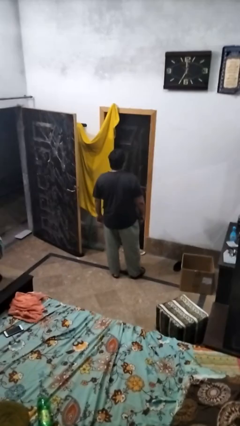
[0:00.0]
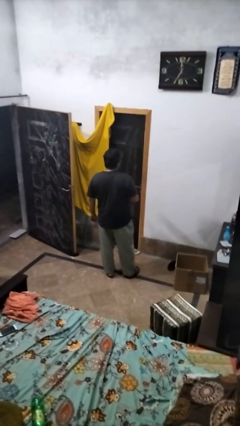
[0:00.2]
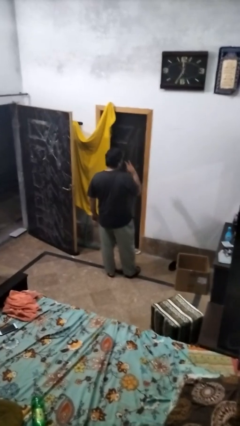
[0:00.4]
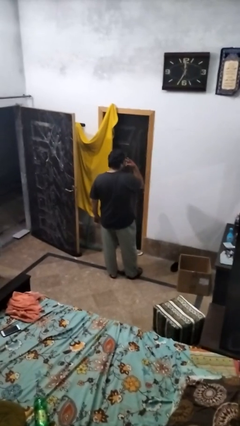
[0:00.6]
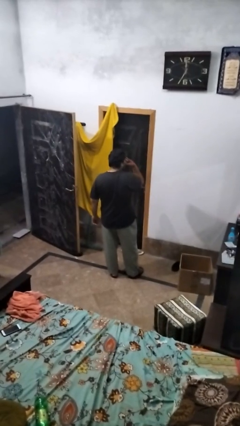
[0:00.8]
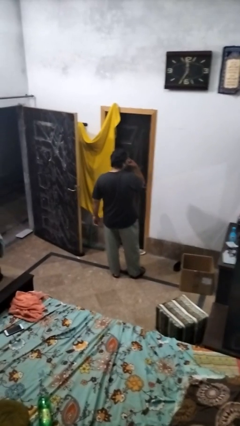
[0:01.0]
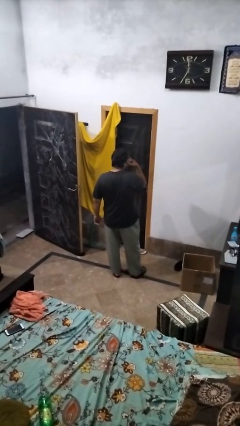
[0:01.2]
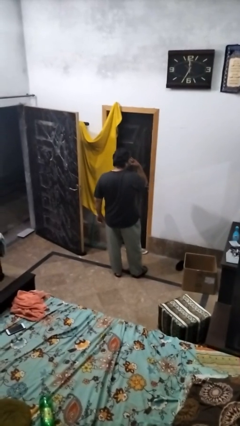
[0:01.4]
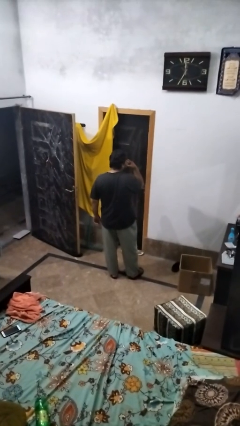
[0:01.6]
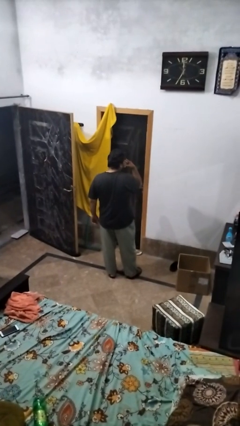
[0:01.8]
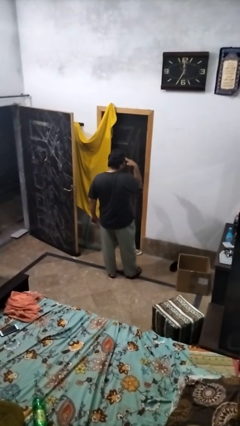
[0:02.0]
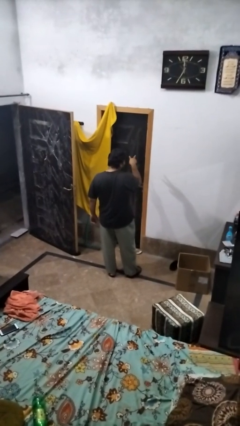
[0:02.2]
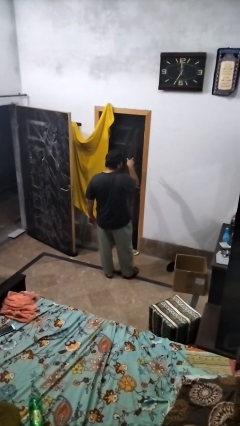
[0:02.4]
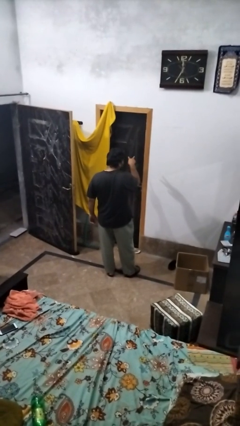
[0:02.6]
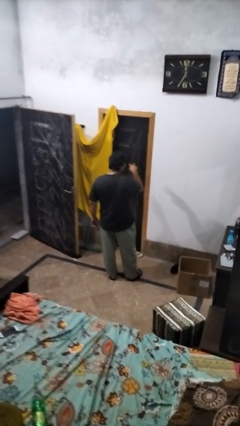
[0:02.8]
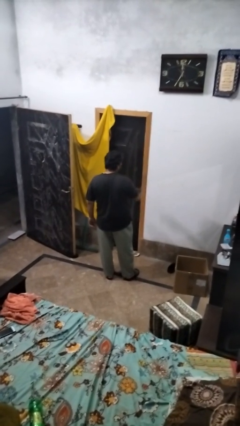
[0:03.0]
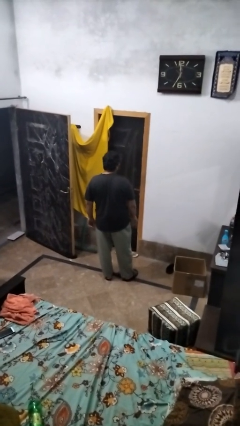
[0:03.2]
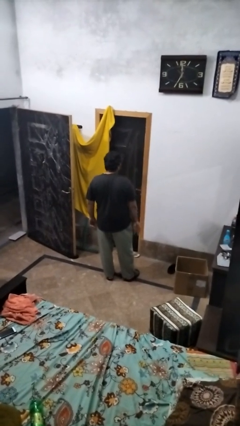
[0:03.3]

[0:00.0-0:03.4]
person gestures watch closely

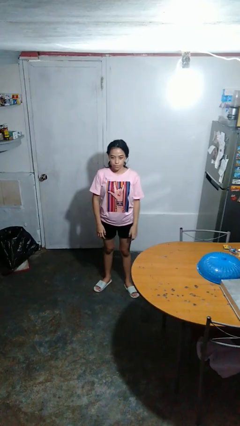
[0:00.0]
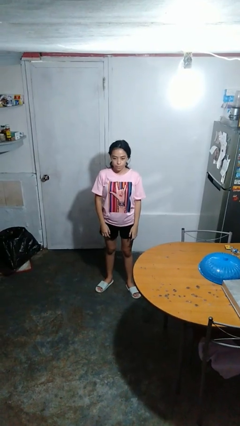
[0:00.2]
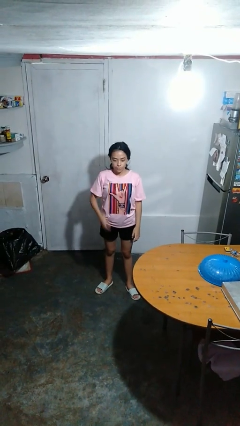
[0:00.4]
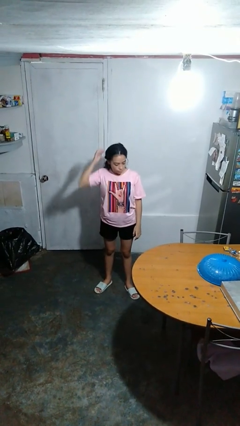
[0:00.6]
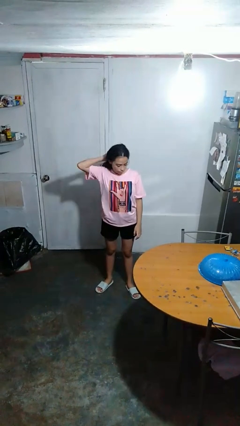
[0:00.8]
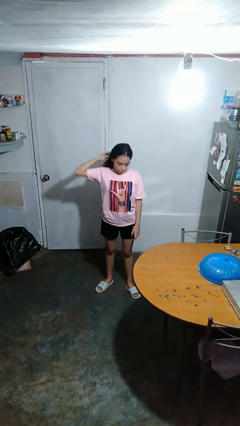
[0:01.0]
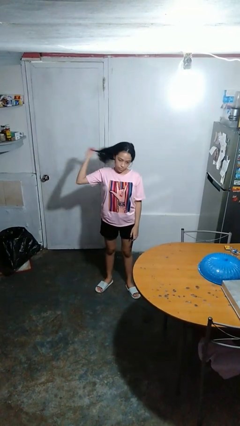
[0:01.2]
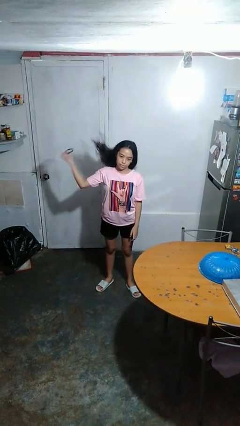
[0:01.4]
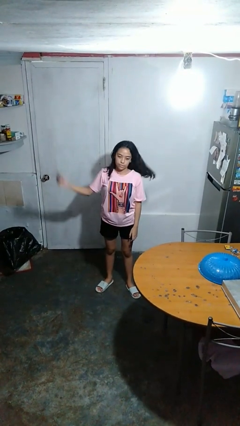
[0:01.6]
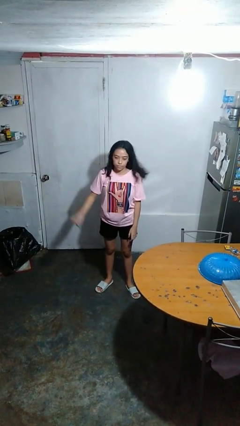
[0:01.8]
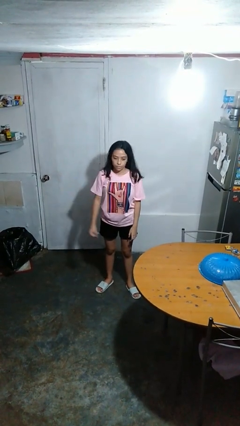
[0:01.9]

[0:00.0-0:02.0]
person takes off hairtie

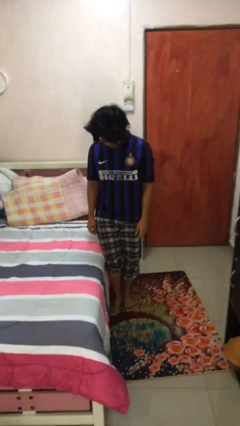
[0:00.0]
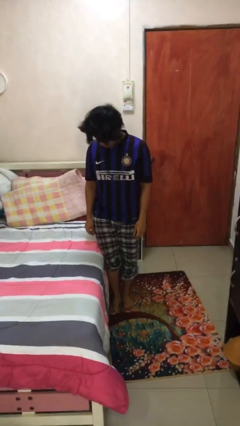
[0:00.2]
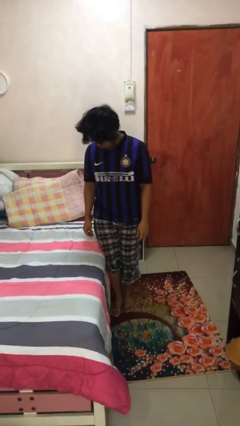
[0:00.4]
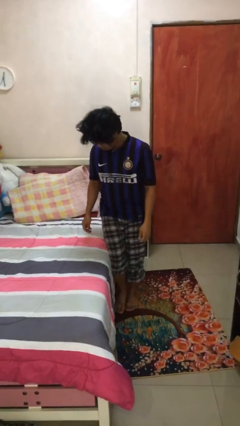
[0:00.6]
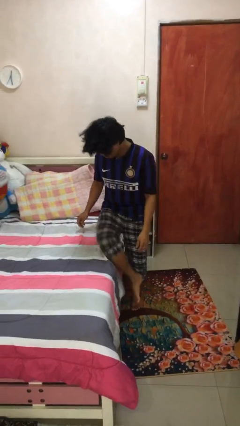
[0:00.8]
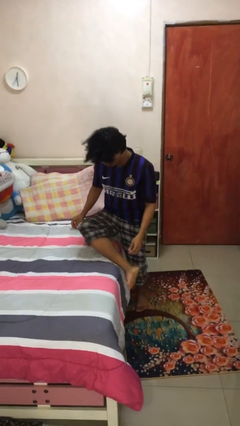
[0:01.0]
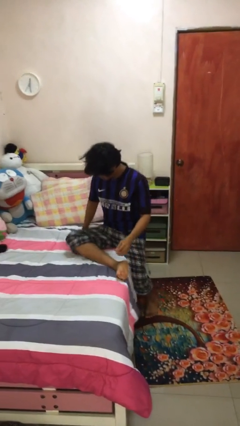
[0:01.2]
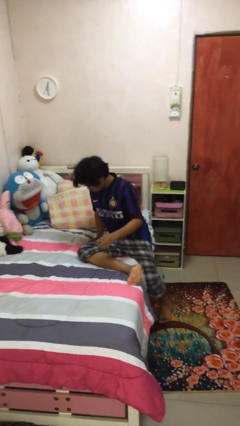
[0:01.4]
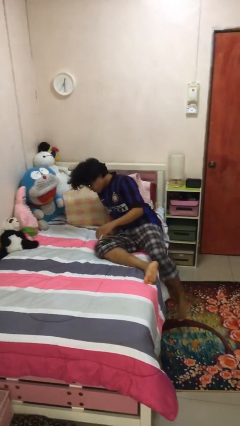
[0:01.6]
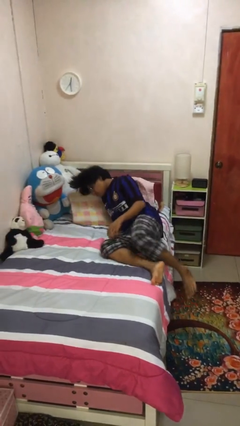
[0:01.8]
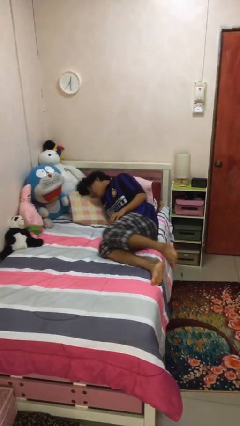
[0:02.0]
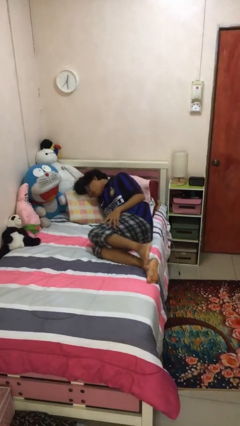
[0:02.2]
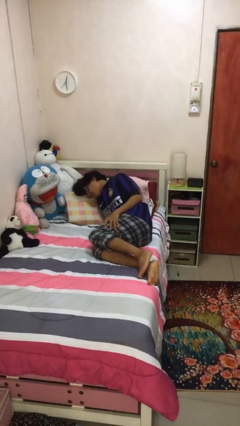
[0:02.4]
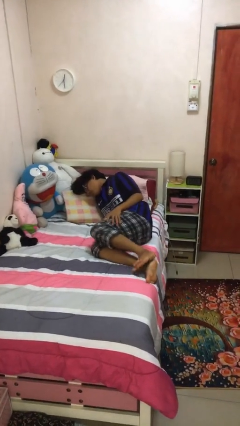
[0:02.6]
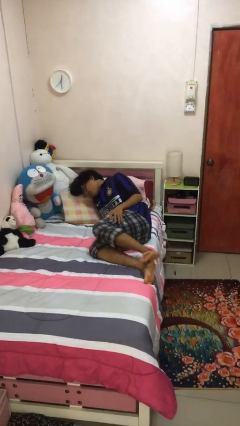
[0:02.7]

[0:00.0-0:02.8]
person lies down on bed

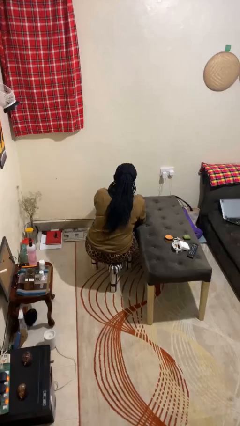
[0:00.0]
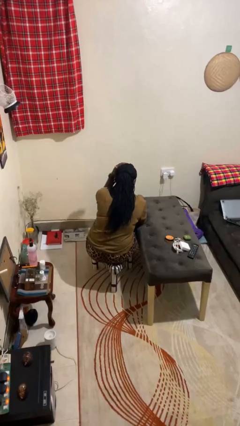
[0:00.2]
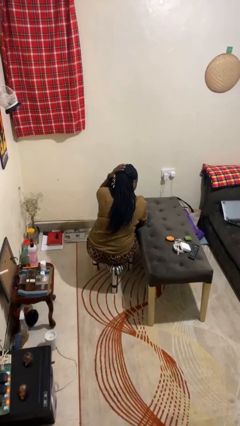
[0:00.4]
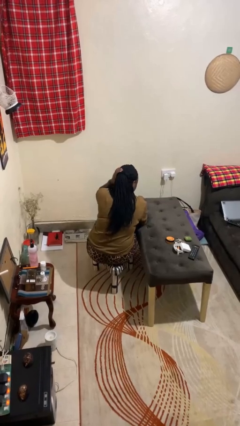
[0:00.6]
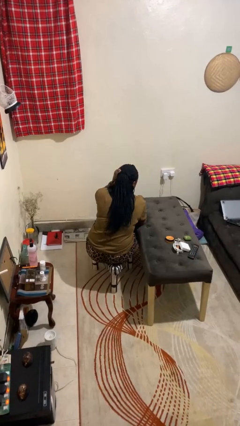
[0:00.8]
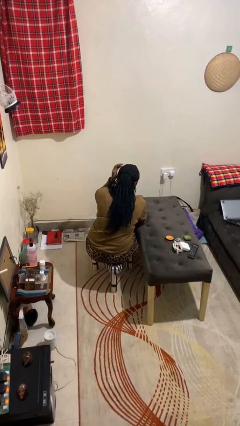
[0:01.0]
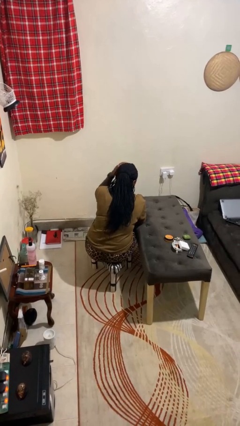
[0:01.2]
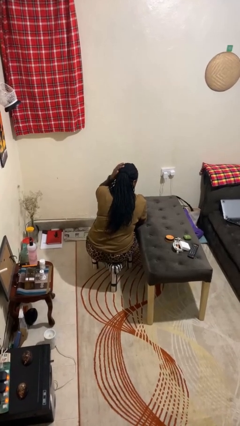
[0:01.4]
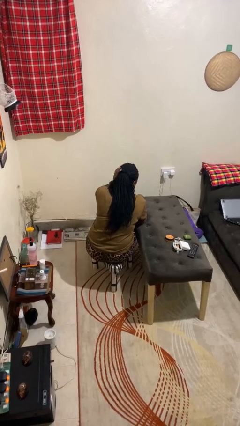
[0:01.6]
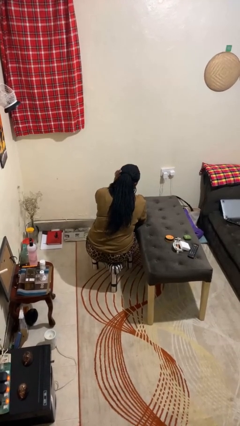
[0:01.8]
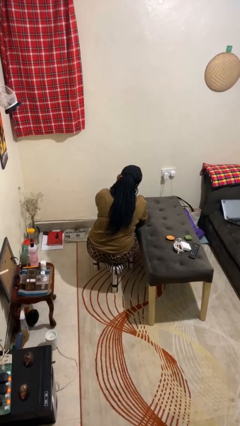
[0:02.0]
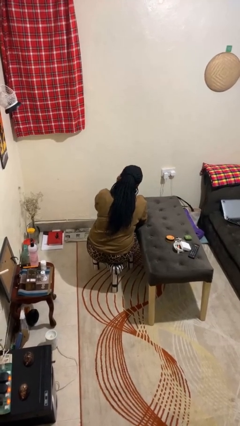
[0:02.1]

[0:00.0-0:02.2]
person strokes hair

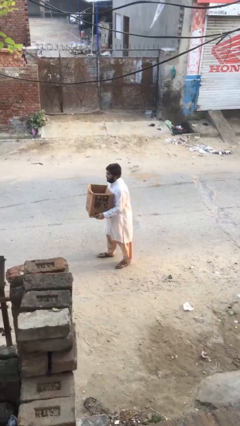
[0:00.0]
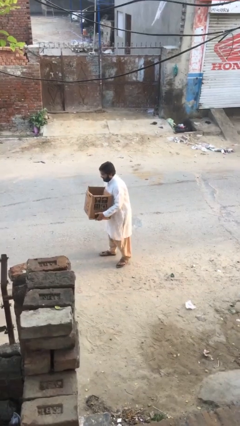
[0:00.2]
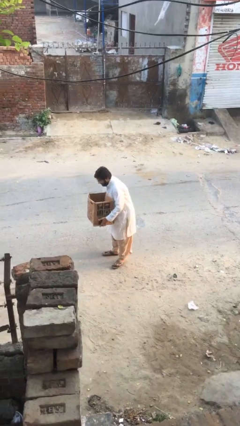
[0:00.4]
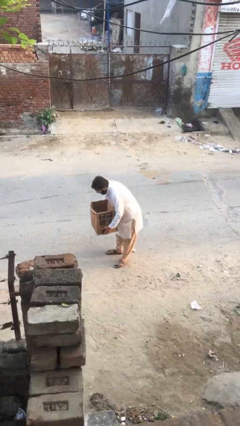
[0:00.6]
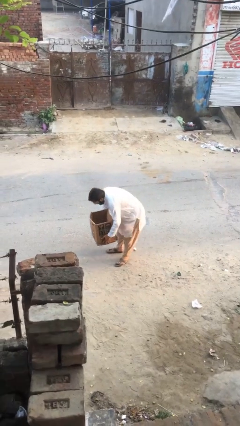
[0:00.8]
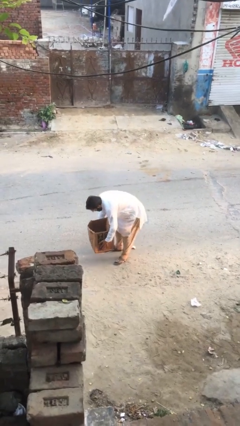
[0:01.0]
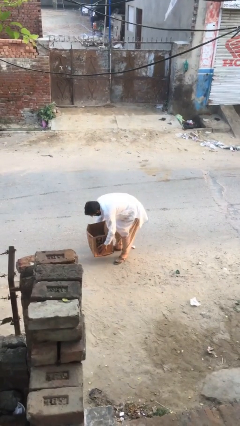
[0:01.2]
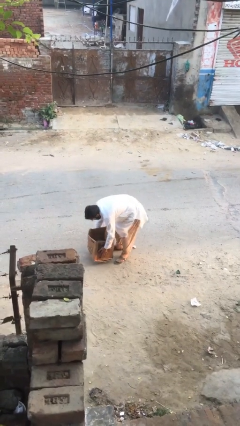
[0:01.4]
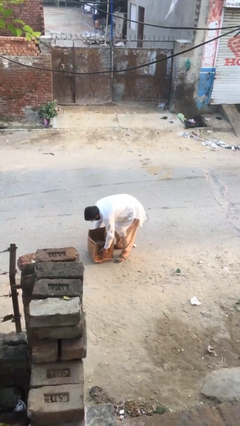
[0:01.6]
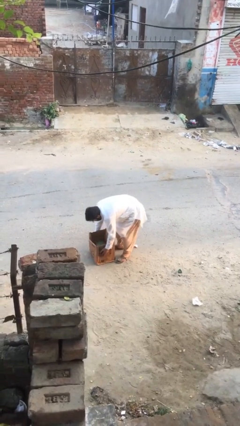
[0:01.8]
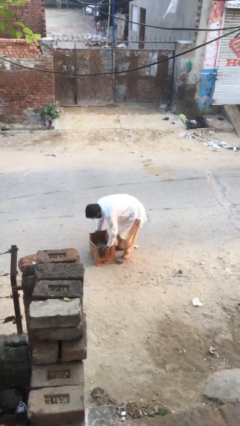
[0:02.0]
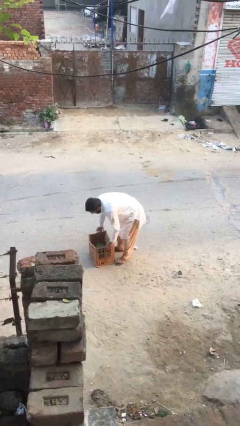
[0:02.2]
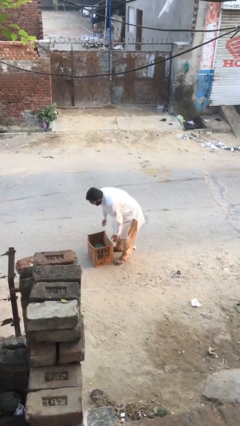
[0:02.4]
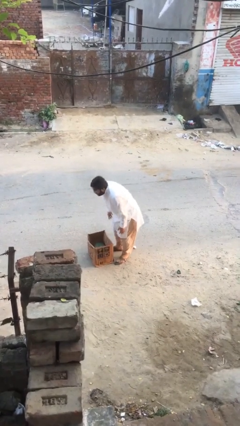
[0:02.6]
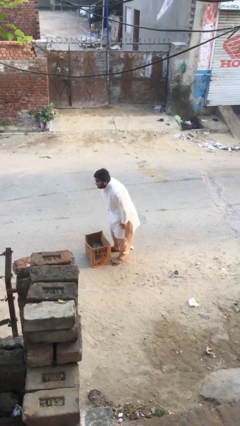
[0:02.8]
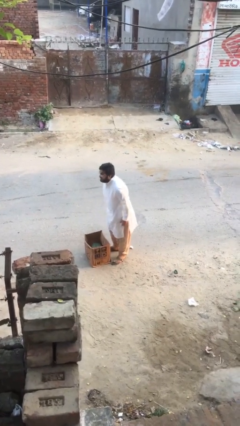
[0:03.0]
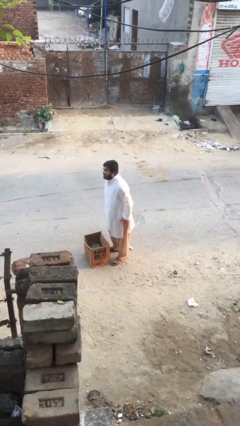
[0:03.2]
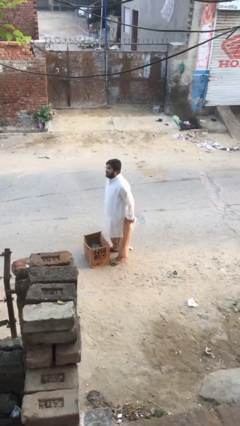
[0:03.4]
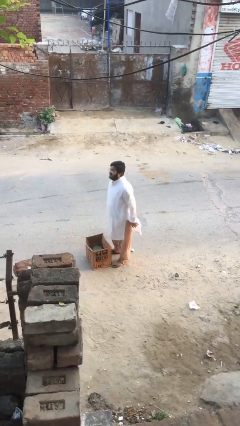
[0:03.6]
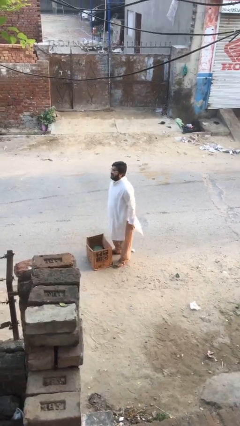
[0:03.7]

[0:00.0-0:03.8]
person puts down object on floor

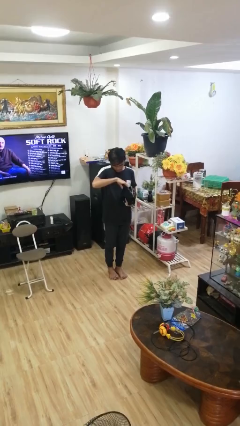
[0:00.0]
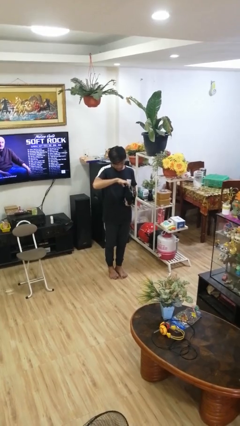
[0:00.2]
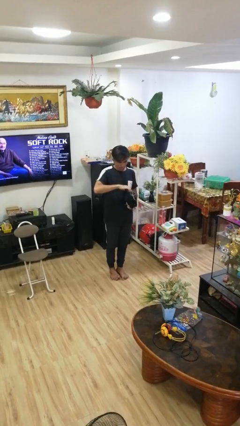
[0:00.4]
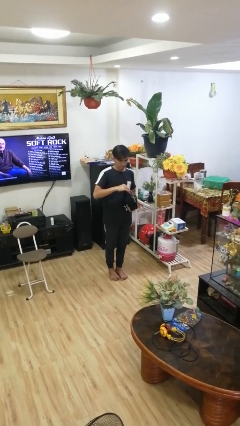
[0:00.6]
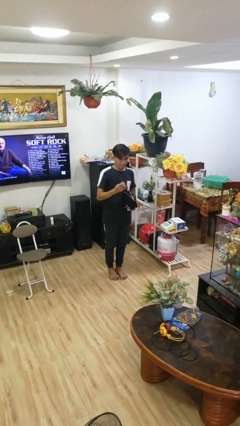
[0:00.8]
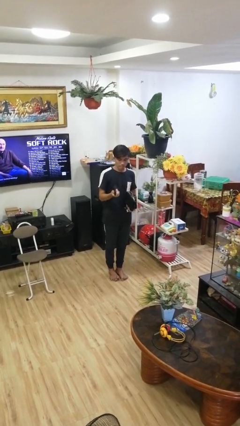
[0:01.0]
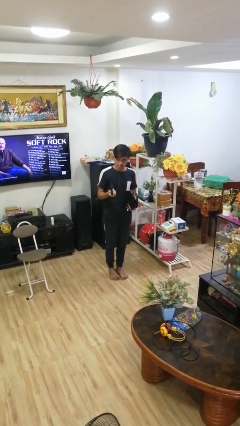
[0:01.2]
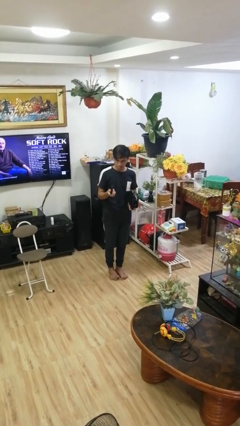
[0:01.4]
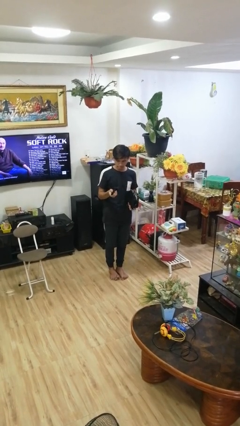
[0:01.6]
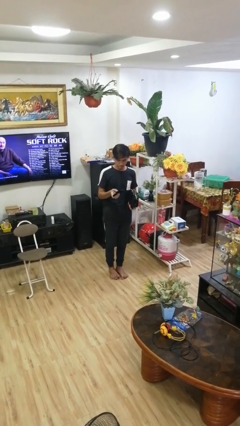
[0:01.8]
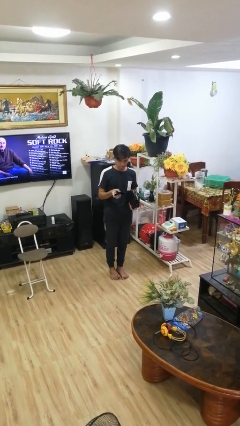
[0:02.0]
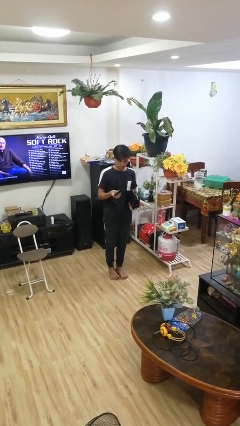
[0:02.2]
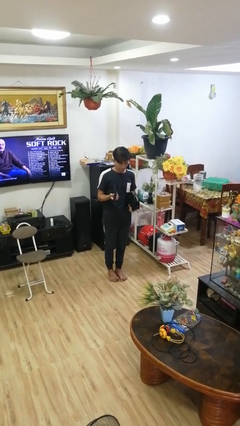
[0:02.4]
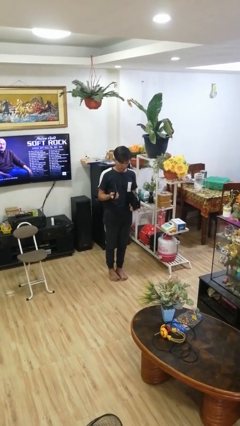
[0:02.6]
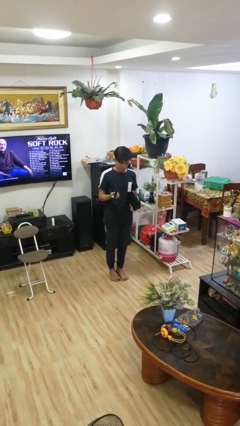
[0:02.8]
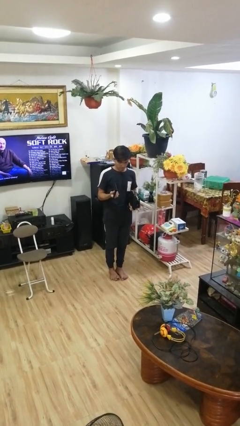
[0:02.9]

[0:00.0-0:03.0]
person takes object from purse
